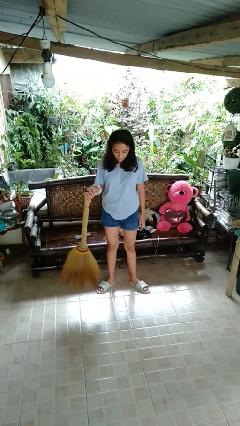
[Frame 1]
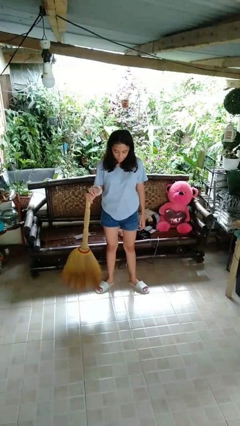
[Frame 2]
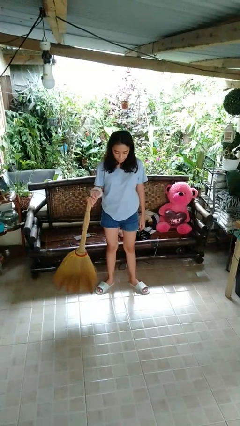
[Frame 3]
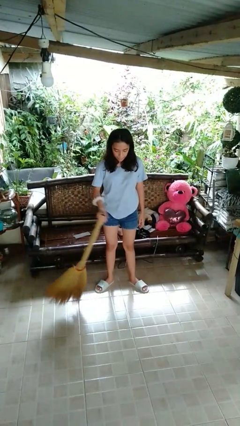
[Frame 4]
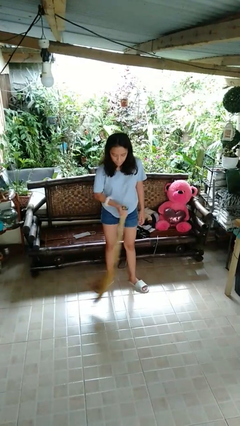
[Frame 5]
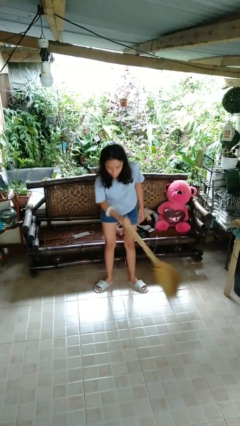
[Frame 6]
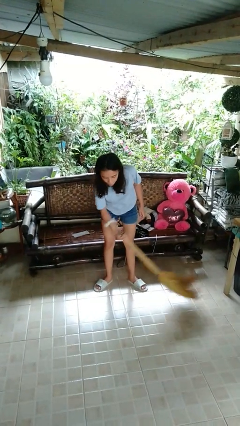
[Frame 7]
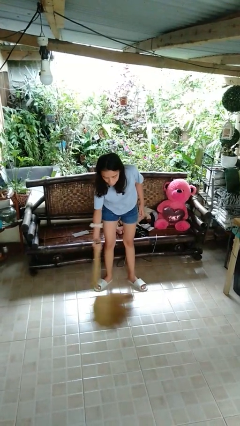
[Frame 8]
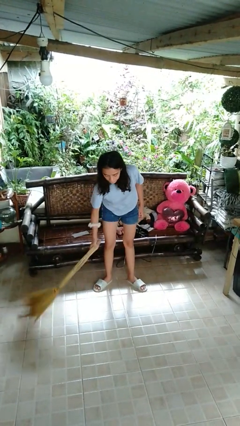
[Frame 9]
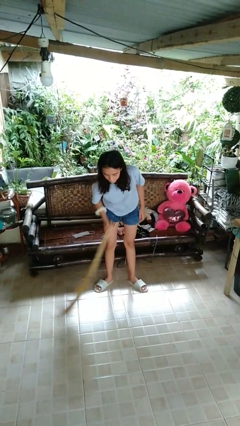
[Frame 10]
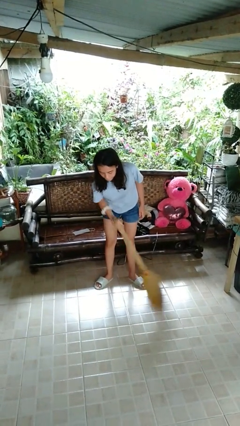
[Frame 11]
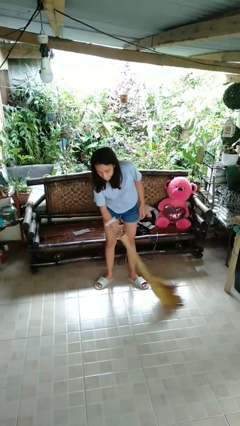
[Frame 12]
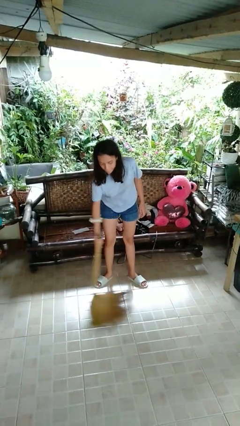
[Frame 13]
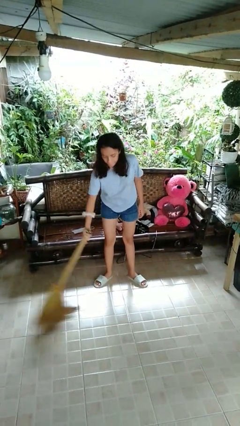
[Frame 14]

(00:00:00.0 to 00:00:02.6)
person sweeps floor

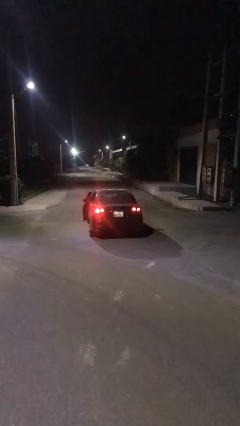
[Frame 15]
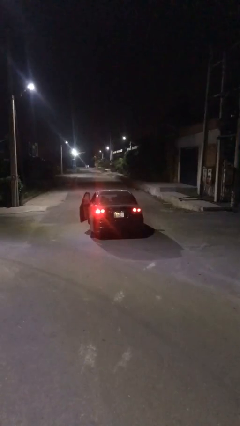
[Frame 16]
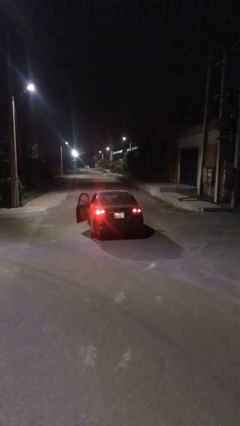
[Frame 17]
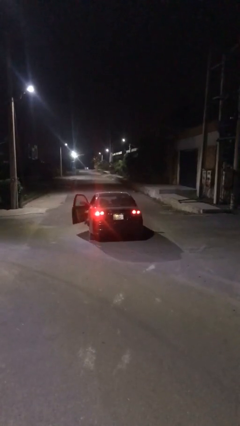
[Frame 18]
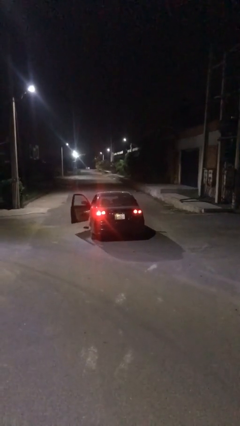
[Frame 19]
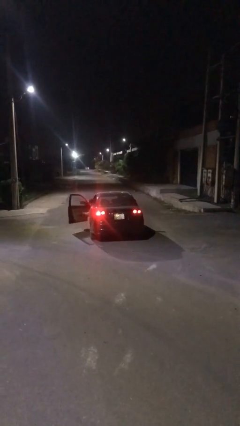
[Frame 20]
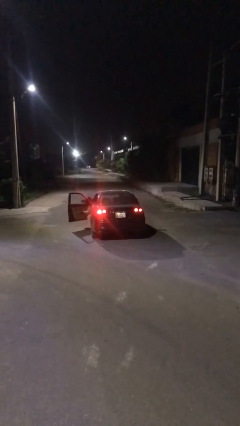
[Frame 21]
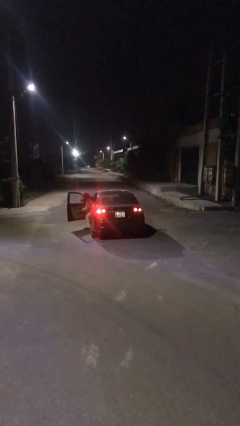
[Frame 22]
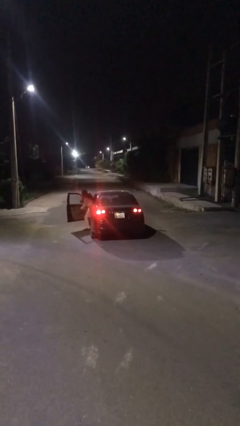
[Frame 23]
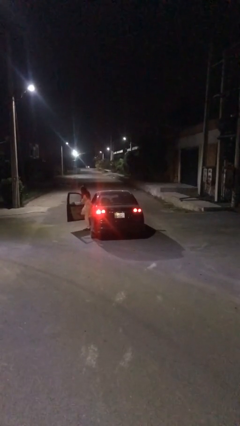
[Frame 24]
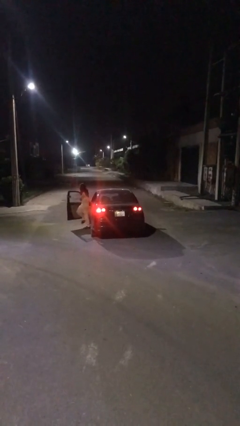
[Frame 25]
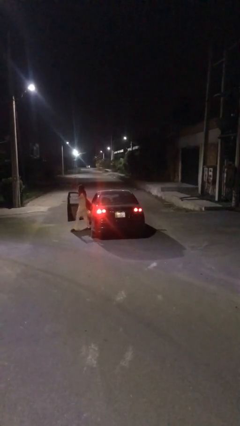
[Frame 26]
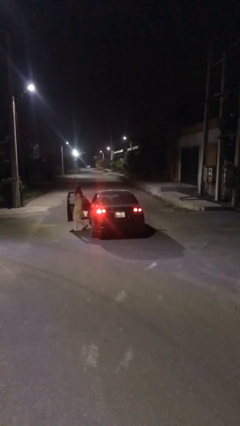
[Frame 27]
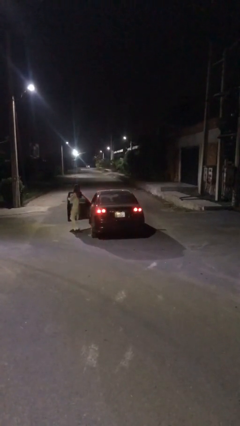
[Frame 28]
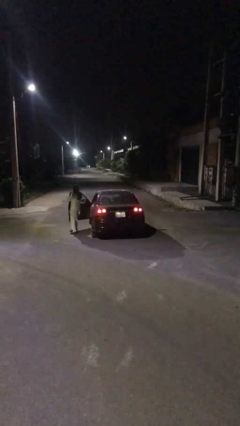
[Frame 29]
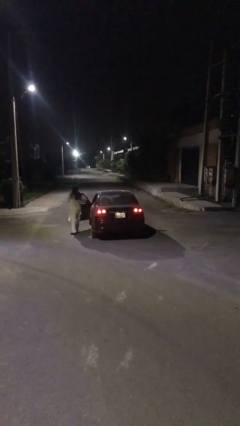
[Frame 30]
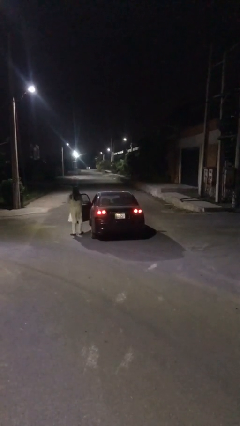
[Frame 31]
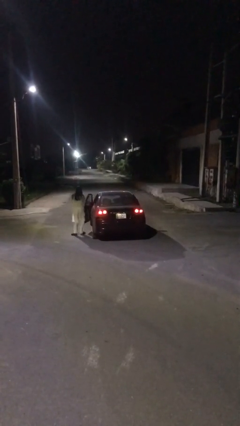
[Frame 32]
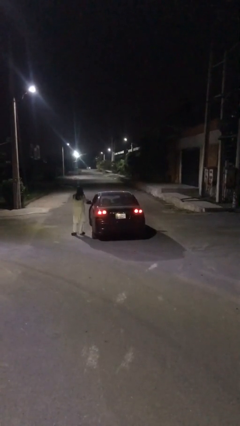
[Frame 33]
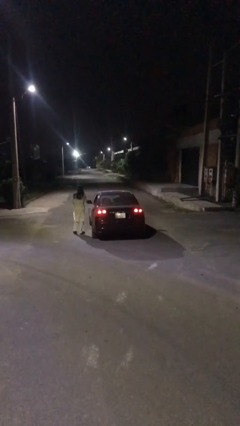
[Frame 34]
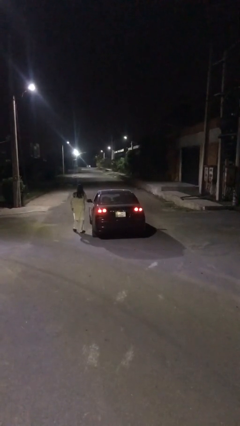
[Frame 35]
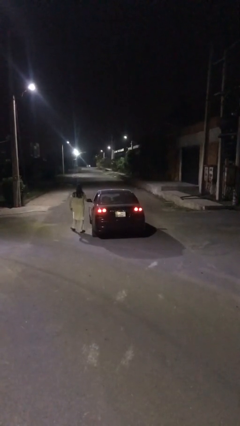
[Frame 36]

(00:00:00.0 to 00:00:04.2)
car drops off person

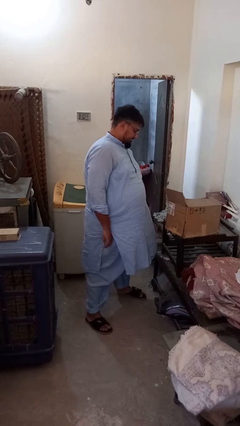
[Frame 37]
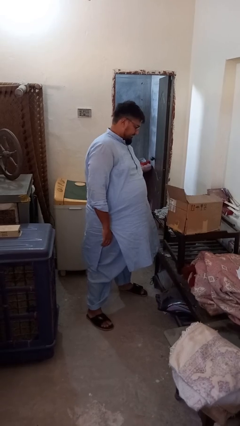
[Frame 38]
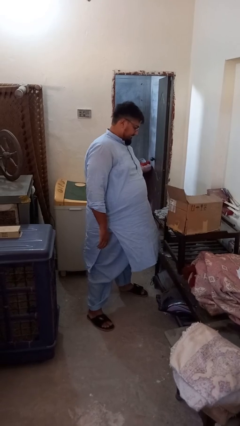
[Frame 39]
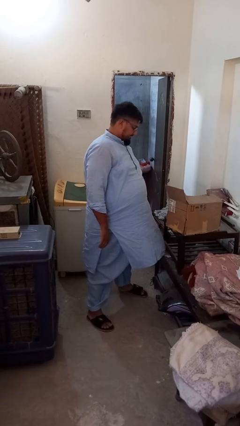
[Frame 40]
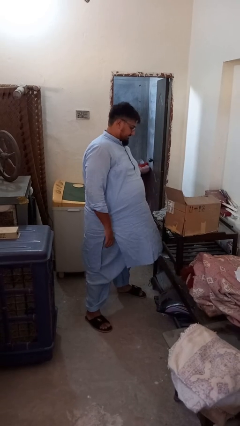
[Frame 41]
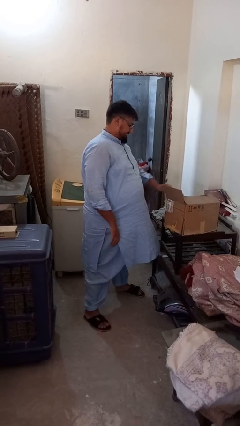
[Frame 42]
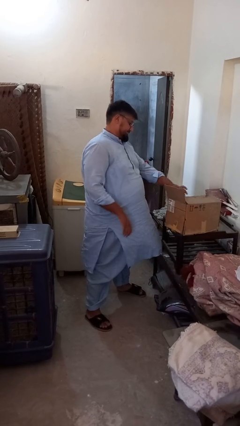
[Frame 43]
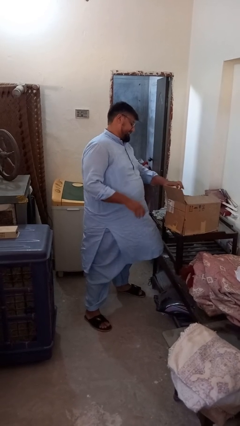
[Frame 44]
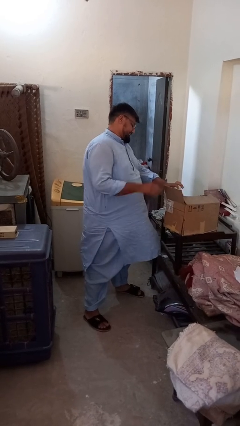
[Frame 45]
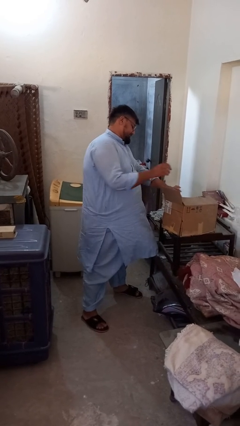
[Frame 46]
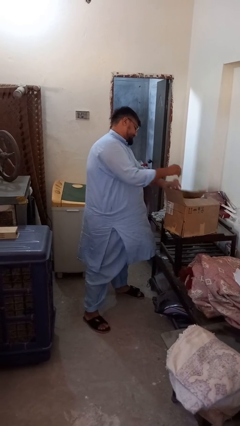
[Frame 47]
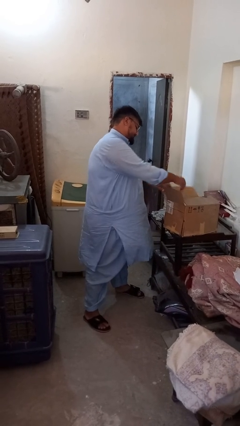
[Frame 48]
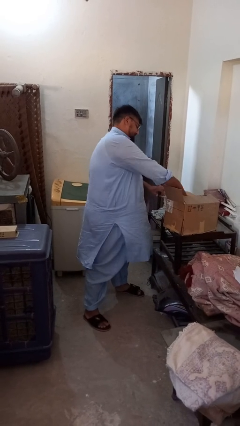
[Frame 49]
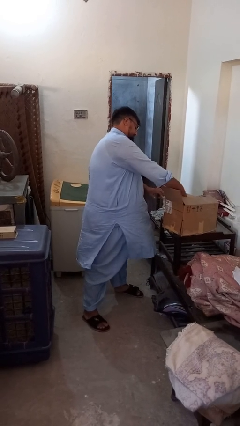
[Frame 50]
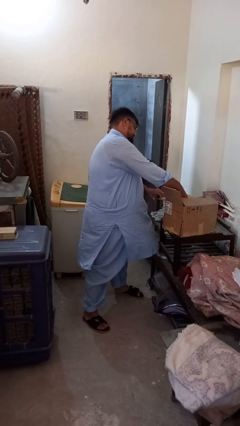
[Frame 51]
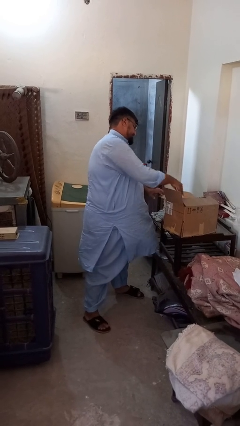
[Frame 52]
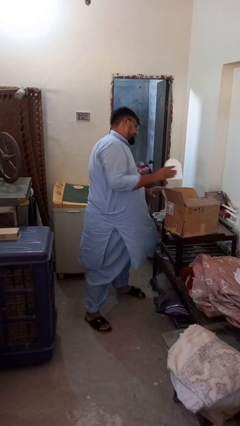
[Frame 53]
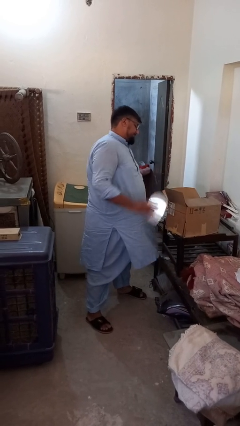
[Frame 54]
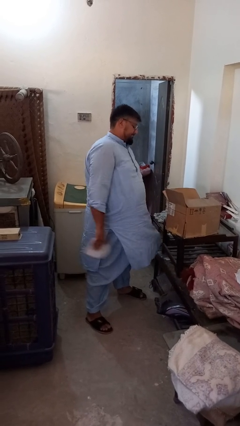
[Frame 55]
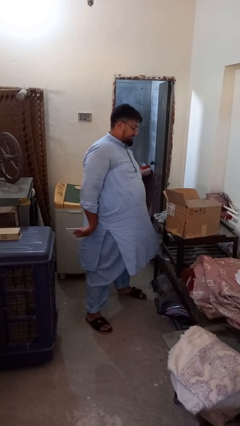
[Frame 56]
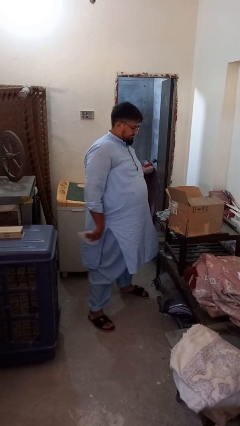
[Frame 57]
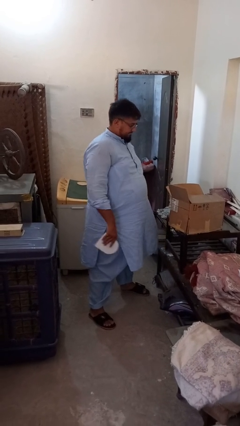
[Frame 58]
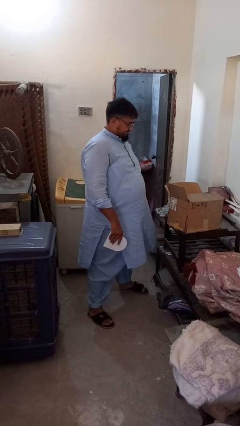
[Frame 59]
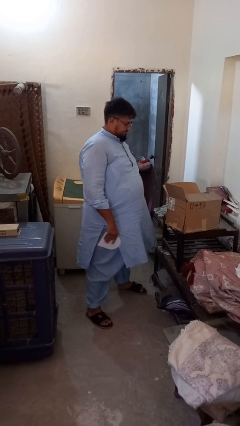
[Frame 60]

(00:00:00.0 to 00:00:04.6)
person takes object from box

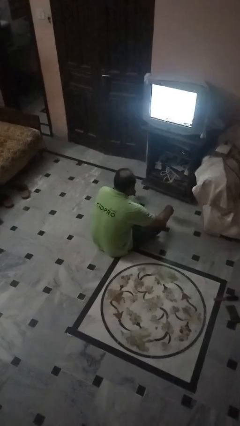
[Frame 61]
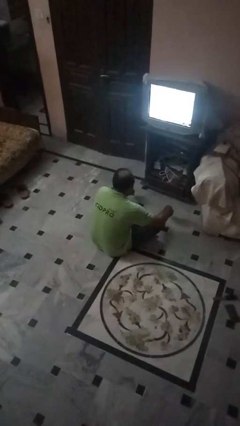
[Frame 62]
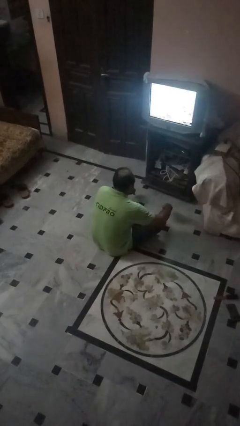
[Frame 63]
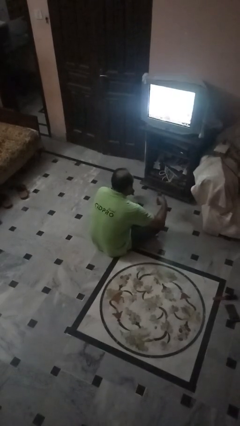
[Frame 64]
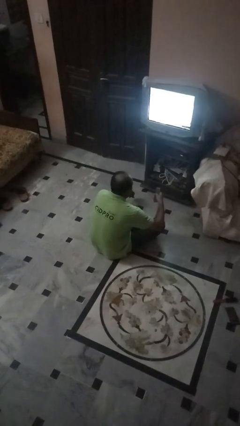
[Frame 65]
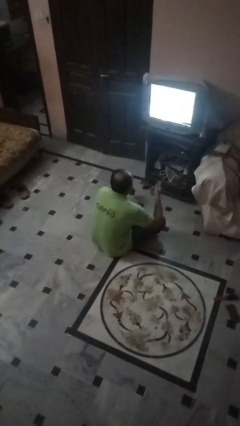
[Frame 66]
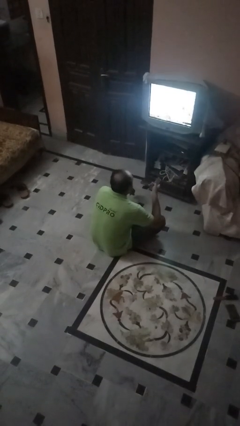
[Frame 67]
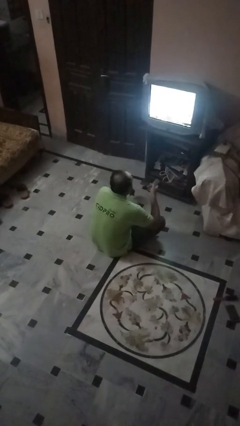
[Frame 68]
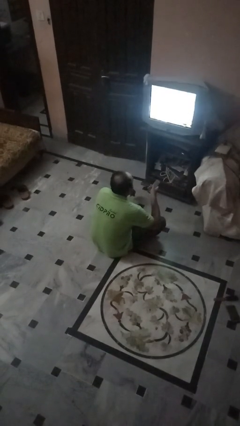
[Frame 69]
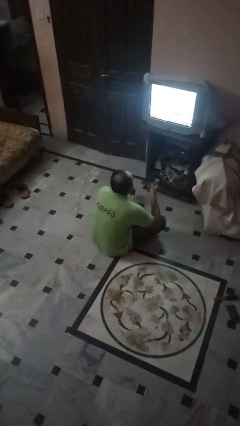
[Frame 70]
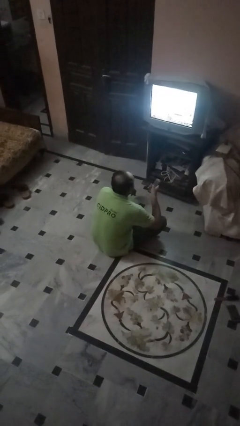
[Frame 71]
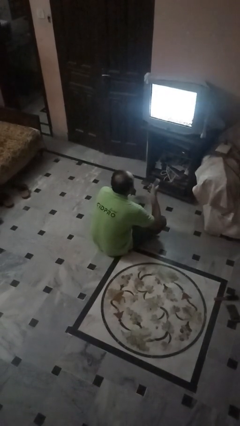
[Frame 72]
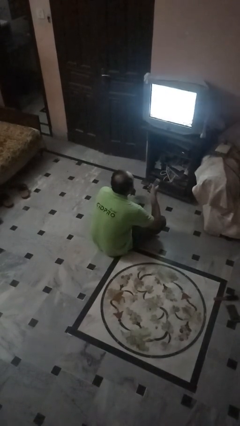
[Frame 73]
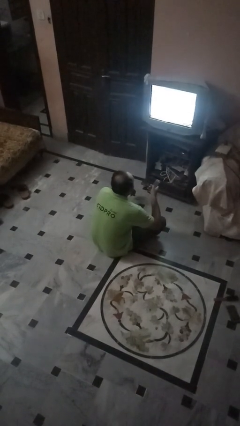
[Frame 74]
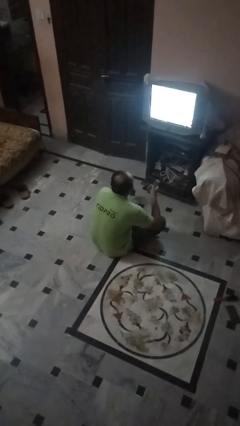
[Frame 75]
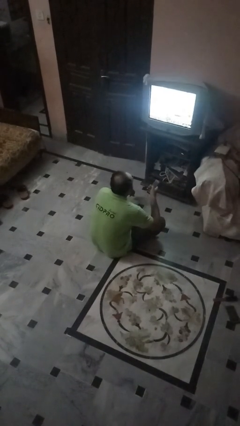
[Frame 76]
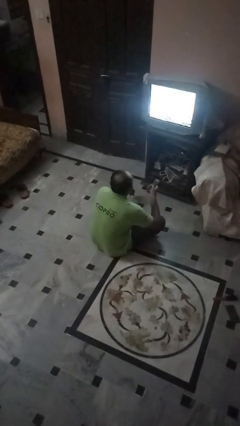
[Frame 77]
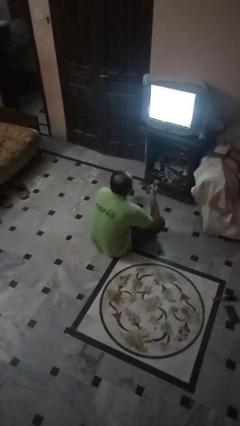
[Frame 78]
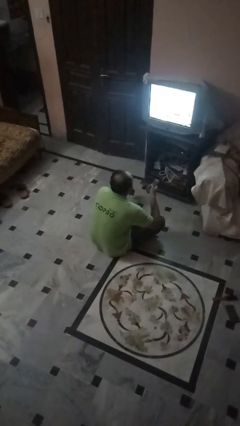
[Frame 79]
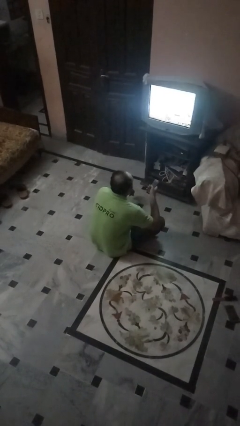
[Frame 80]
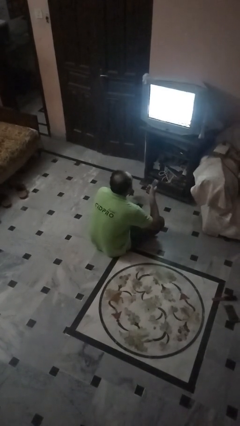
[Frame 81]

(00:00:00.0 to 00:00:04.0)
person uses television remote

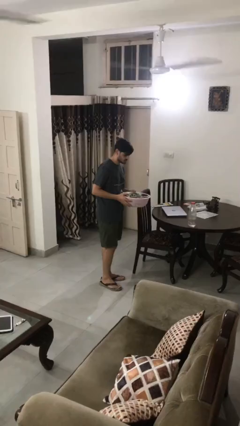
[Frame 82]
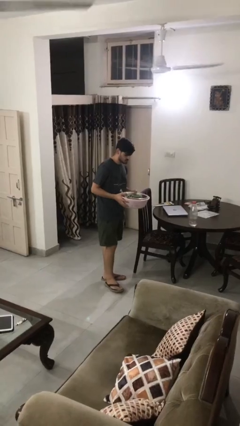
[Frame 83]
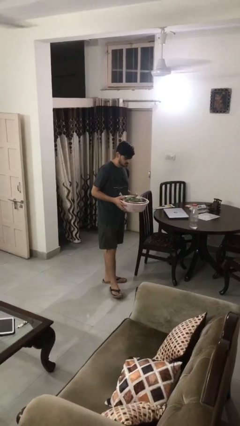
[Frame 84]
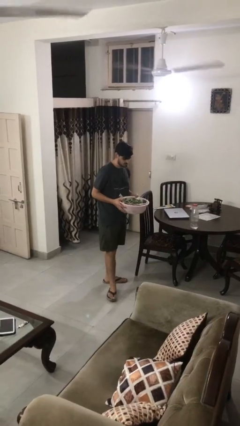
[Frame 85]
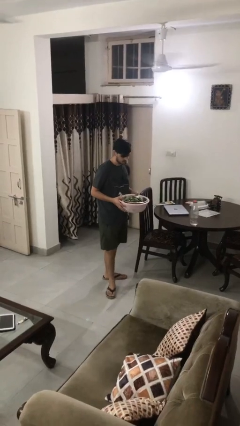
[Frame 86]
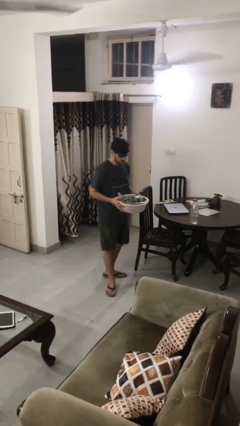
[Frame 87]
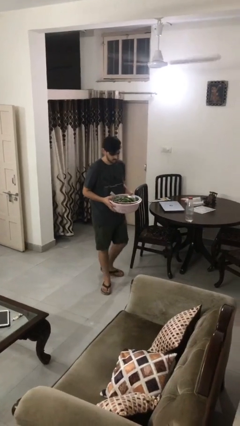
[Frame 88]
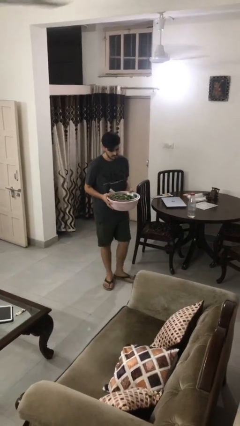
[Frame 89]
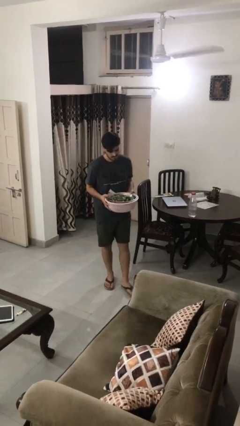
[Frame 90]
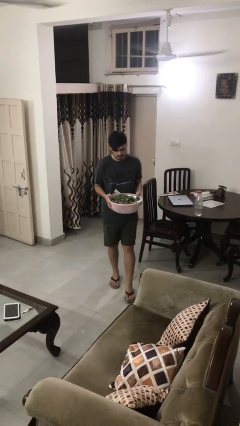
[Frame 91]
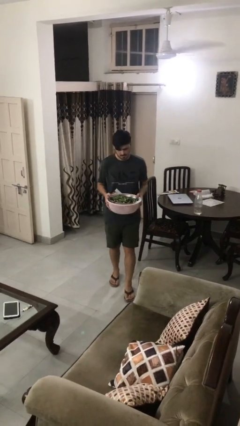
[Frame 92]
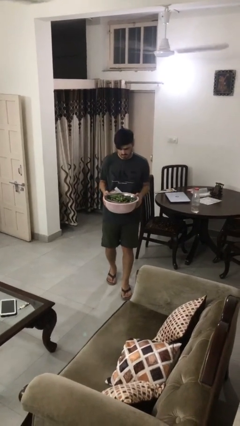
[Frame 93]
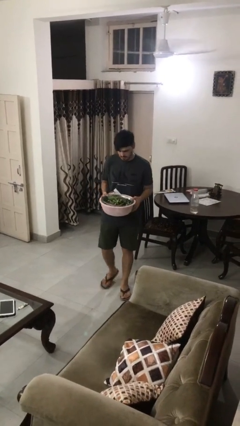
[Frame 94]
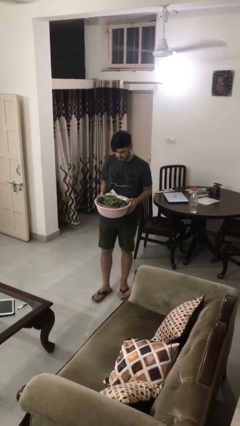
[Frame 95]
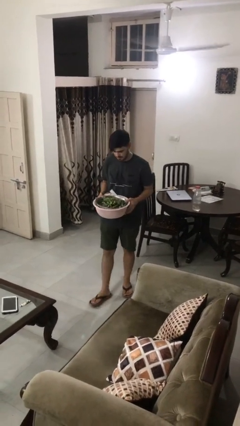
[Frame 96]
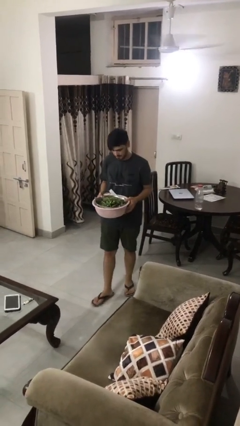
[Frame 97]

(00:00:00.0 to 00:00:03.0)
person carries groceries
